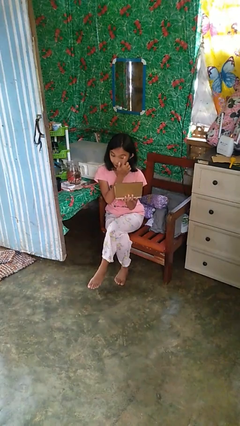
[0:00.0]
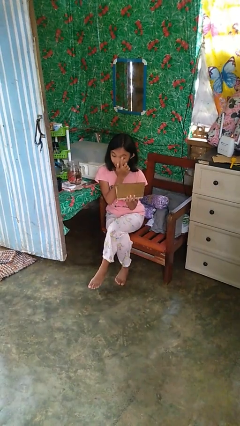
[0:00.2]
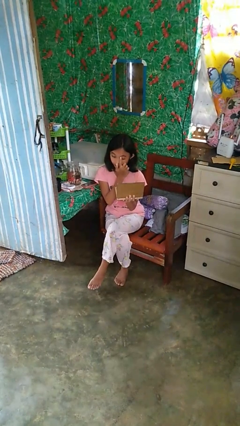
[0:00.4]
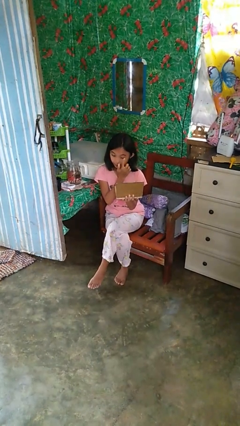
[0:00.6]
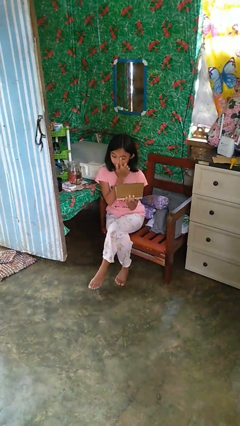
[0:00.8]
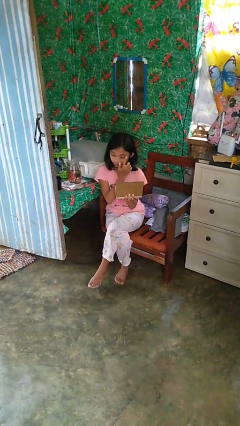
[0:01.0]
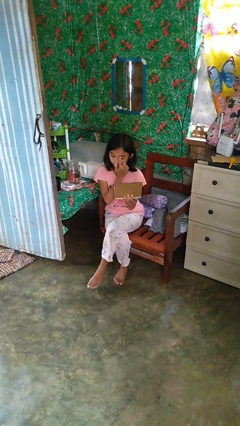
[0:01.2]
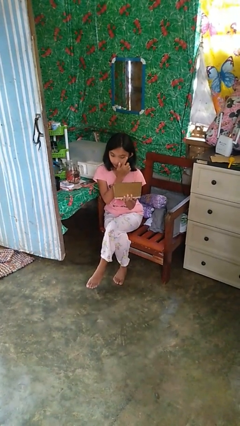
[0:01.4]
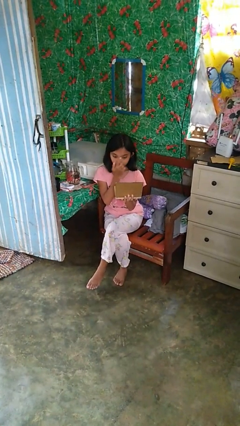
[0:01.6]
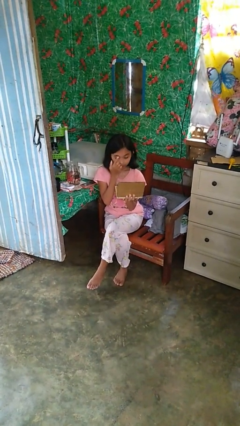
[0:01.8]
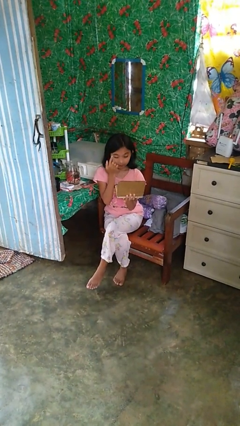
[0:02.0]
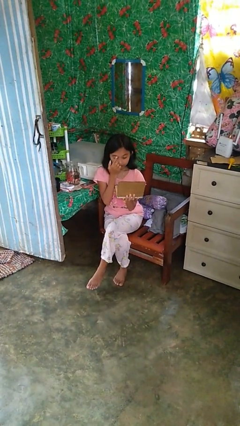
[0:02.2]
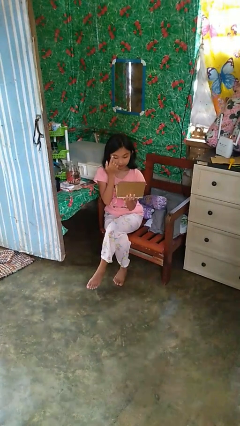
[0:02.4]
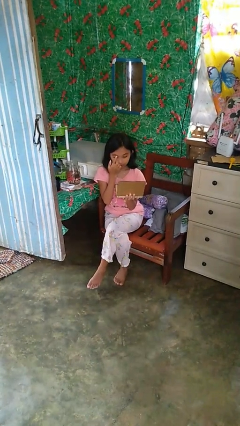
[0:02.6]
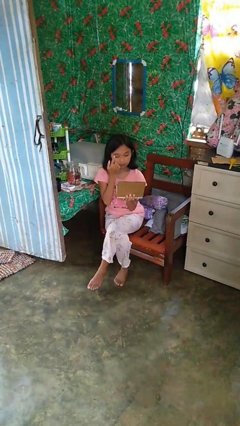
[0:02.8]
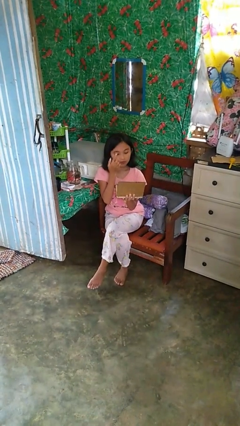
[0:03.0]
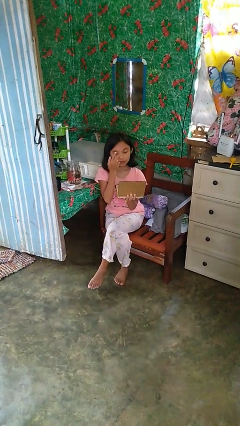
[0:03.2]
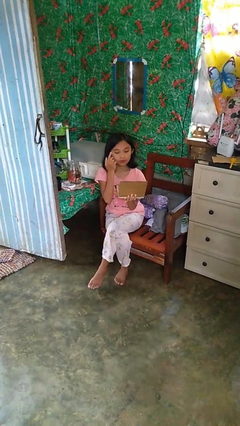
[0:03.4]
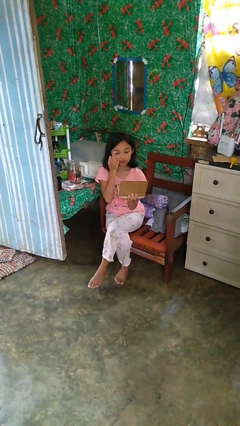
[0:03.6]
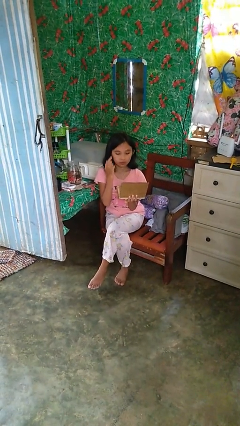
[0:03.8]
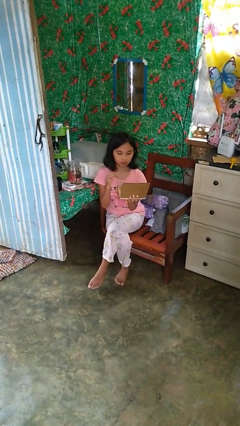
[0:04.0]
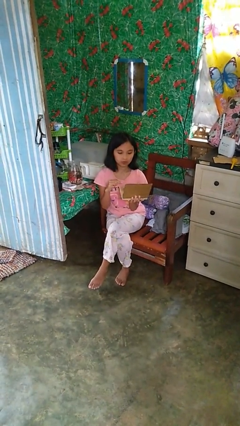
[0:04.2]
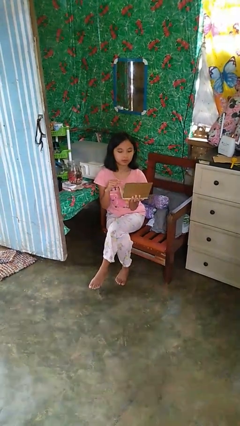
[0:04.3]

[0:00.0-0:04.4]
person applies eye makeup

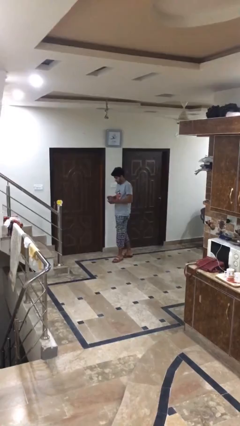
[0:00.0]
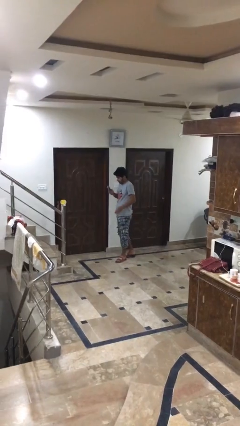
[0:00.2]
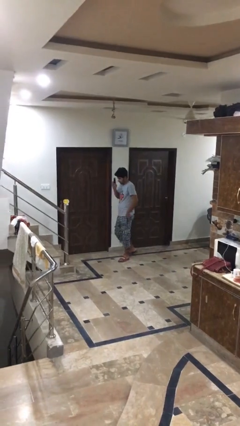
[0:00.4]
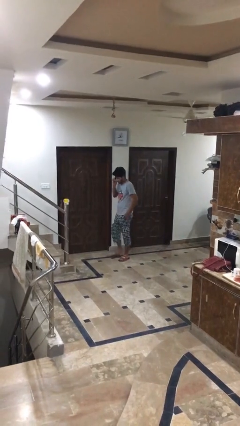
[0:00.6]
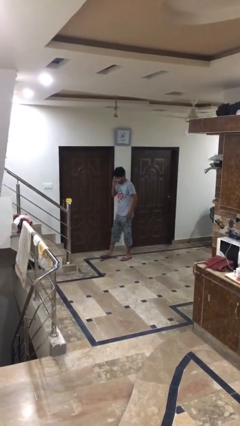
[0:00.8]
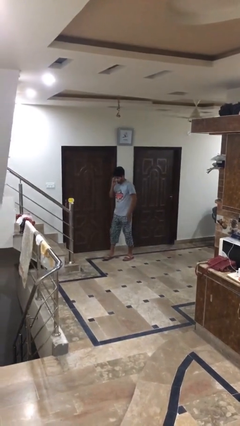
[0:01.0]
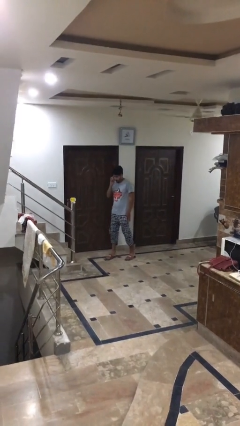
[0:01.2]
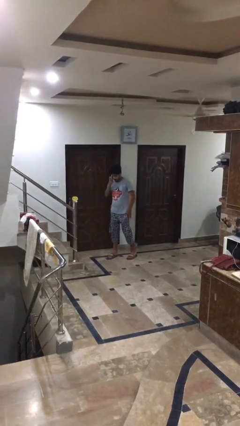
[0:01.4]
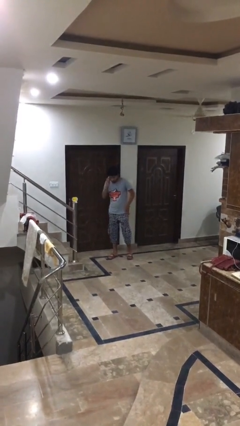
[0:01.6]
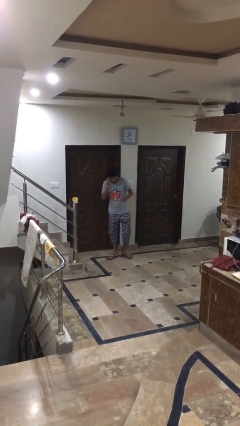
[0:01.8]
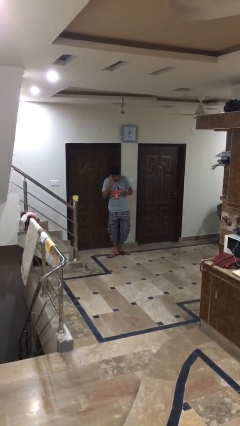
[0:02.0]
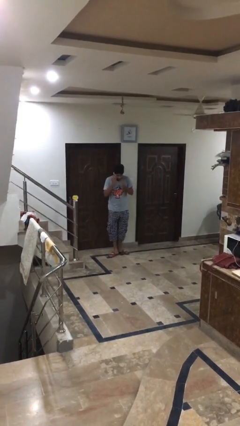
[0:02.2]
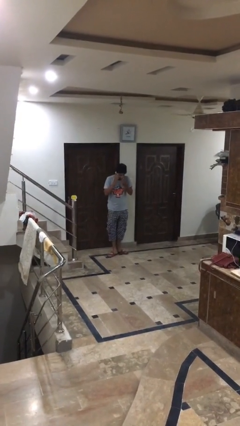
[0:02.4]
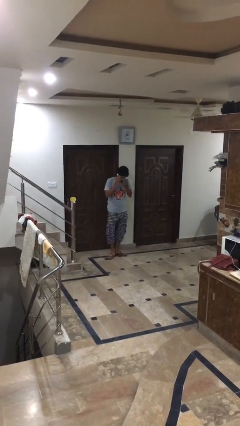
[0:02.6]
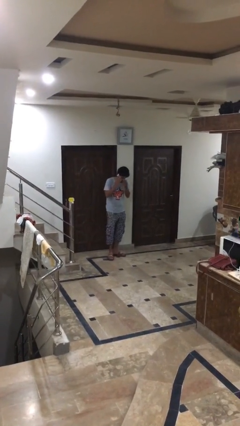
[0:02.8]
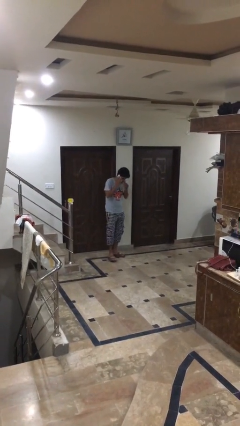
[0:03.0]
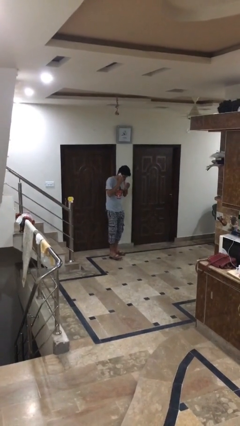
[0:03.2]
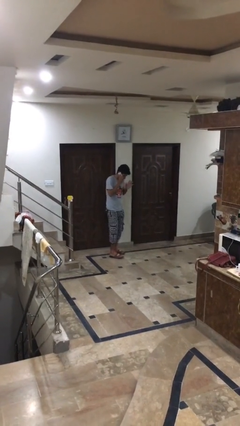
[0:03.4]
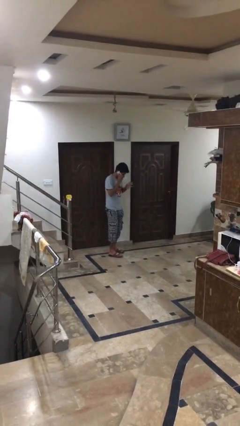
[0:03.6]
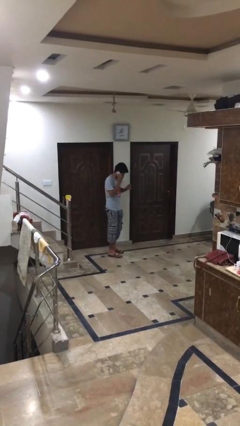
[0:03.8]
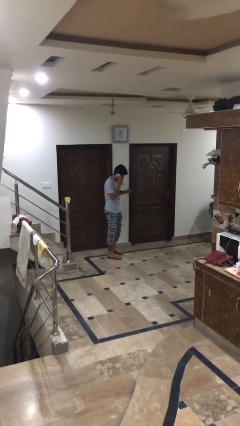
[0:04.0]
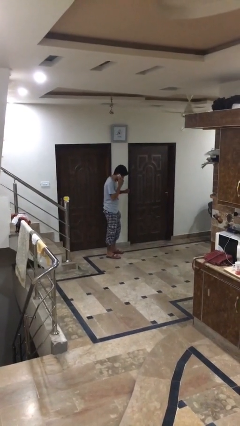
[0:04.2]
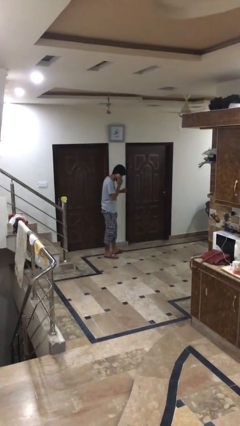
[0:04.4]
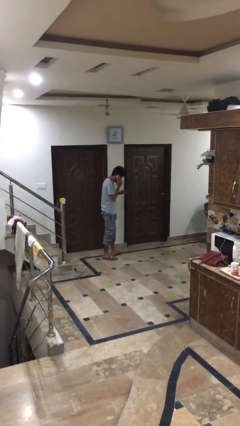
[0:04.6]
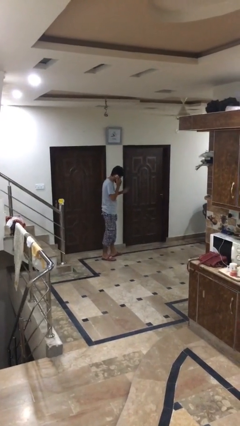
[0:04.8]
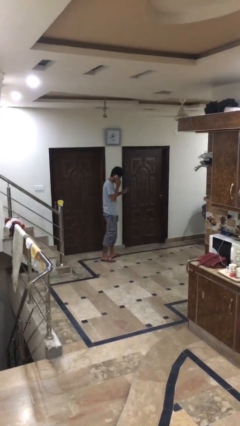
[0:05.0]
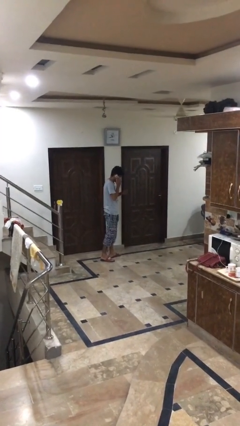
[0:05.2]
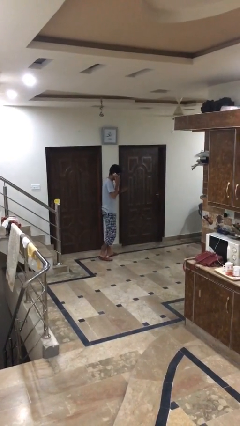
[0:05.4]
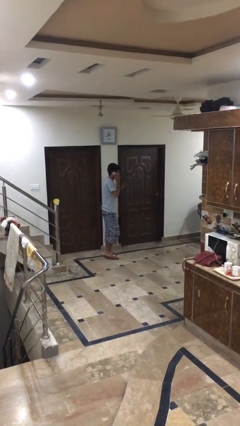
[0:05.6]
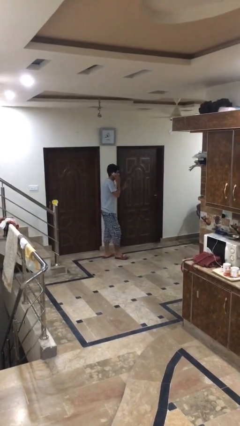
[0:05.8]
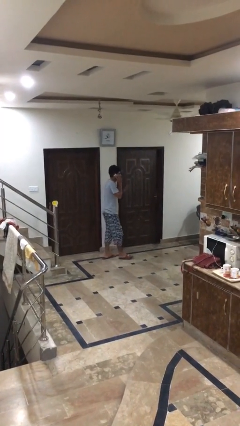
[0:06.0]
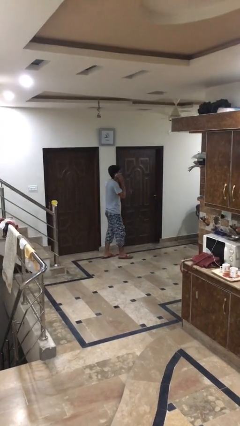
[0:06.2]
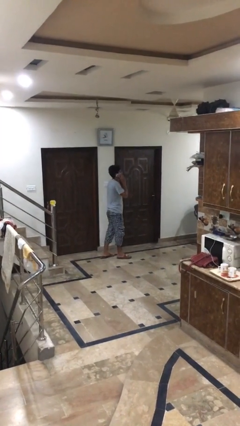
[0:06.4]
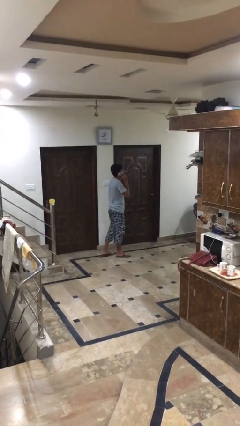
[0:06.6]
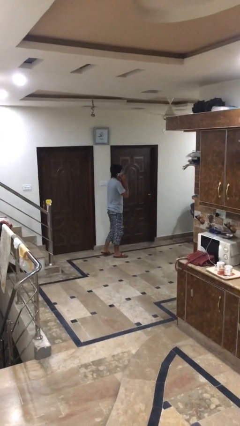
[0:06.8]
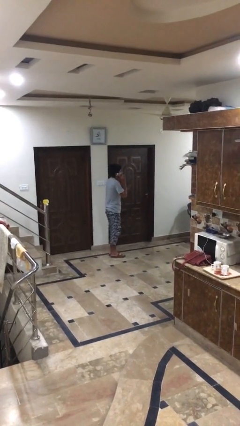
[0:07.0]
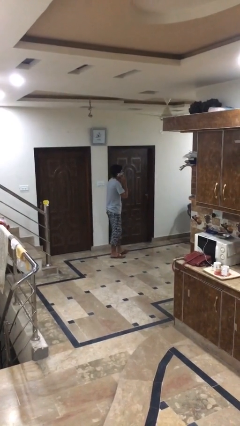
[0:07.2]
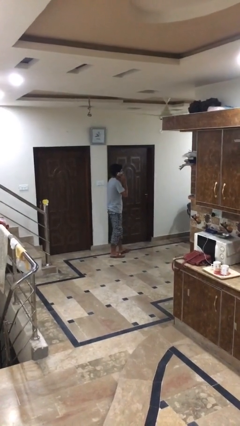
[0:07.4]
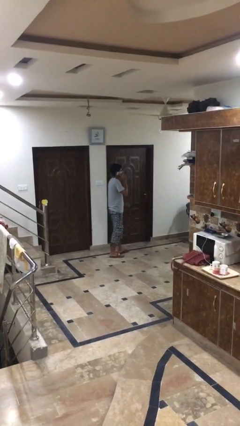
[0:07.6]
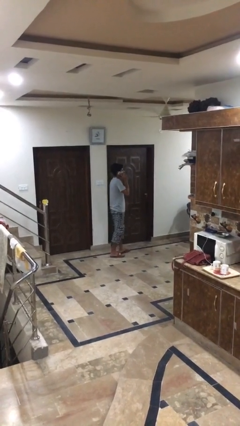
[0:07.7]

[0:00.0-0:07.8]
person talks on phone

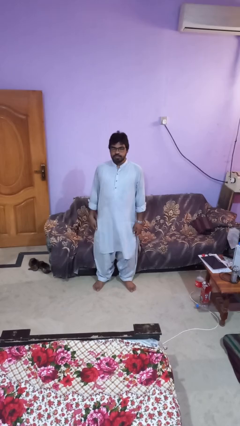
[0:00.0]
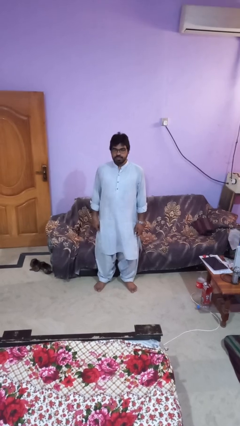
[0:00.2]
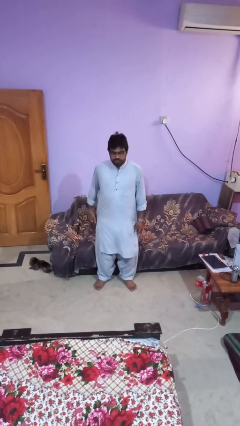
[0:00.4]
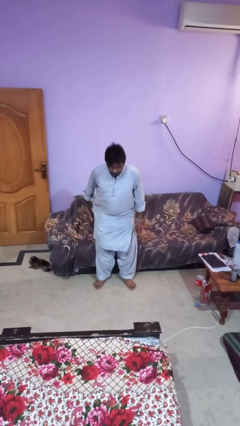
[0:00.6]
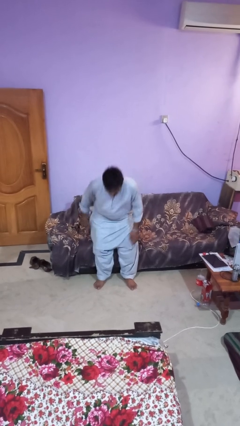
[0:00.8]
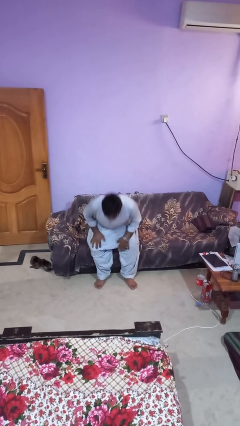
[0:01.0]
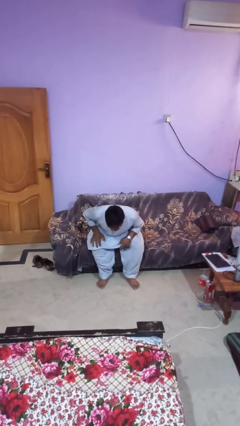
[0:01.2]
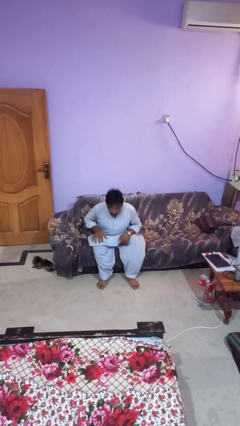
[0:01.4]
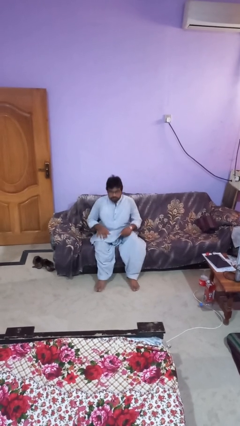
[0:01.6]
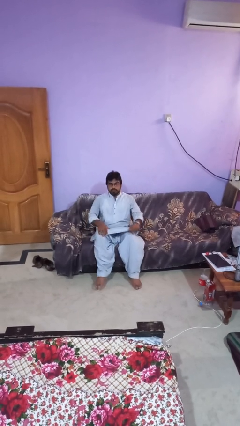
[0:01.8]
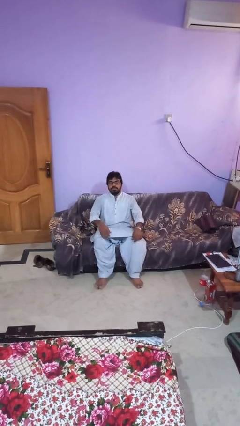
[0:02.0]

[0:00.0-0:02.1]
person lies down on couch

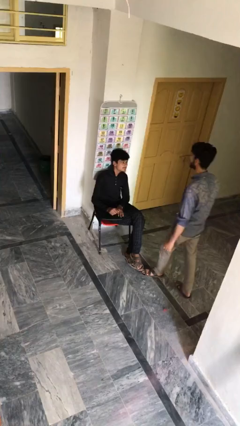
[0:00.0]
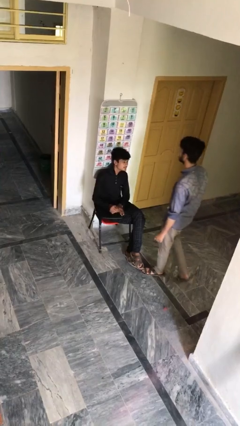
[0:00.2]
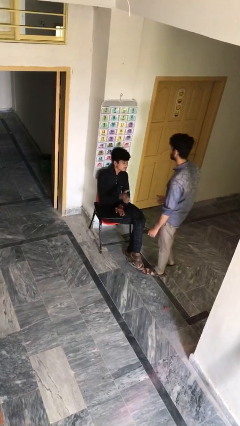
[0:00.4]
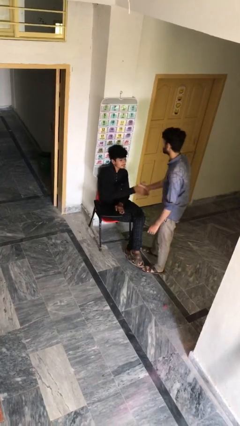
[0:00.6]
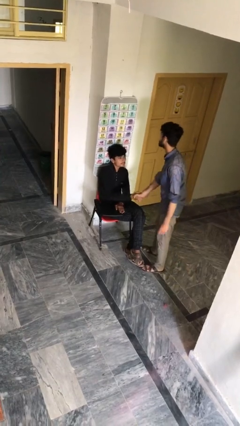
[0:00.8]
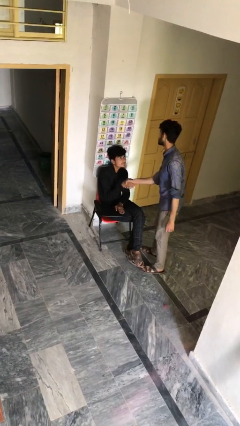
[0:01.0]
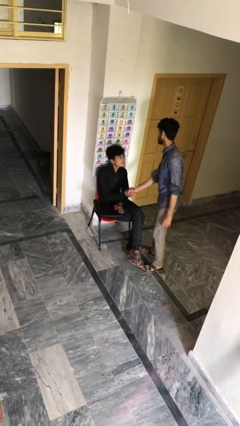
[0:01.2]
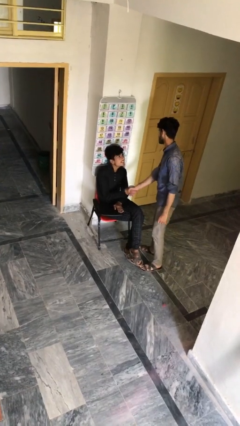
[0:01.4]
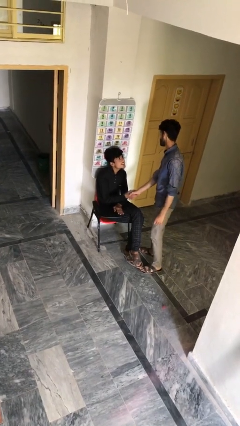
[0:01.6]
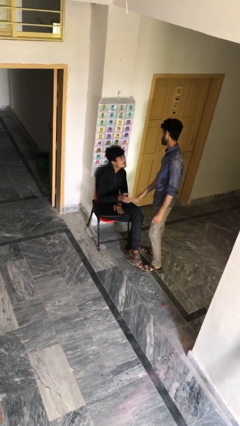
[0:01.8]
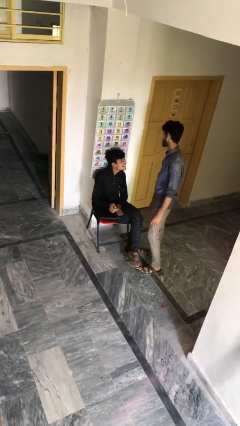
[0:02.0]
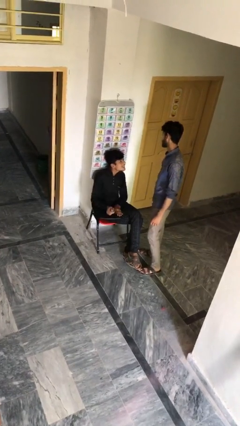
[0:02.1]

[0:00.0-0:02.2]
person shakes hand

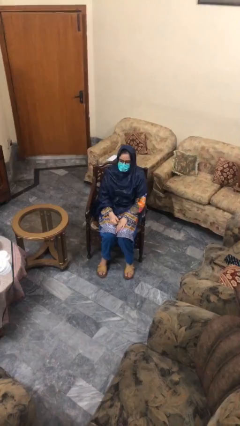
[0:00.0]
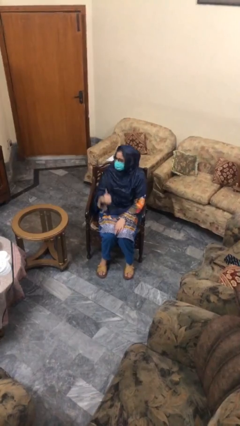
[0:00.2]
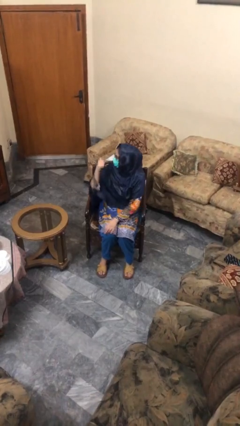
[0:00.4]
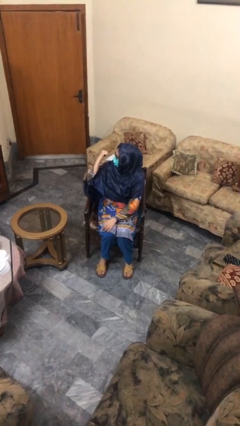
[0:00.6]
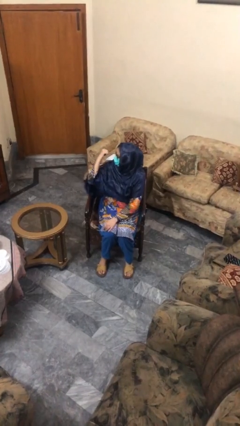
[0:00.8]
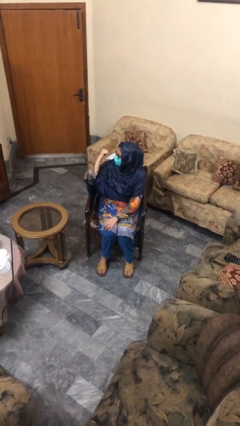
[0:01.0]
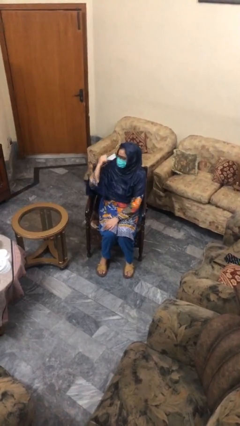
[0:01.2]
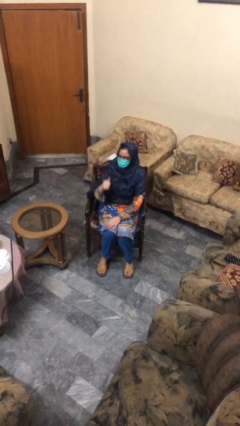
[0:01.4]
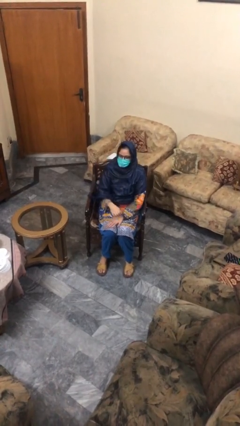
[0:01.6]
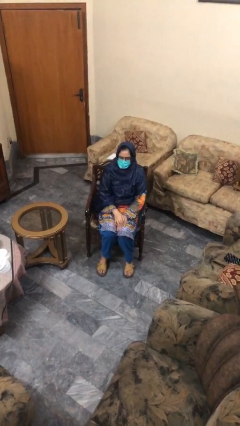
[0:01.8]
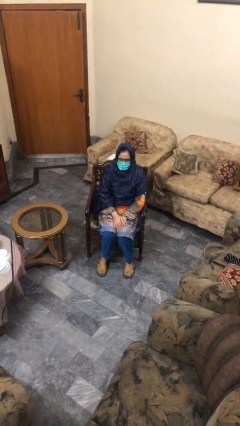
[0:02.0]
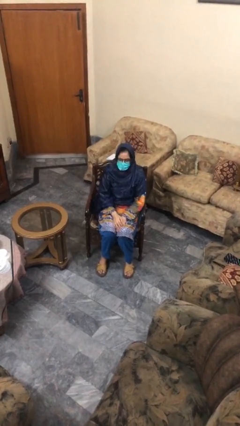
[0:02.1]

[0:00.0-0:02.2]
person gestures behind me
